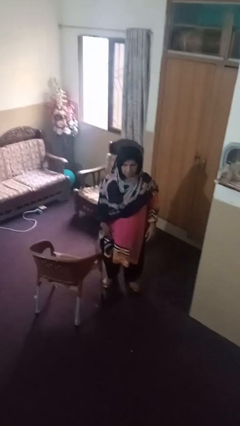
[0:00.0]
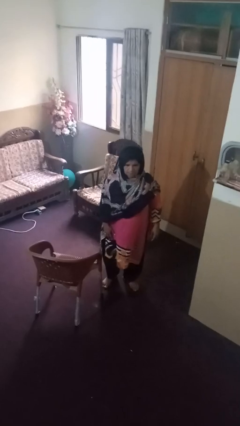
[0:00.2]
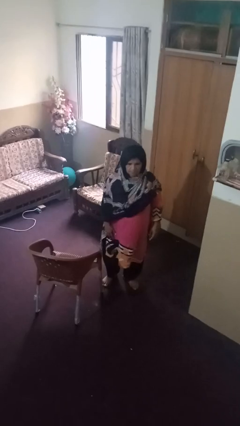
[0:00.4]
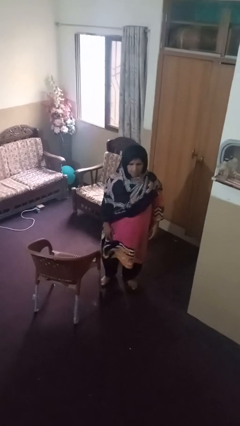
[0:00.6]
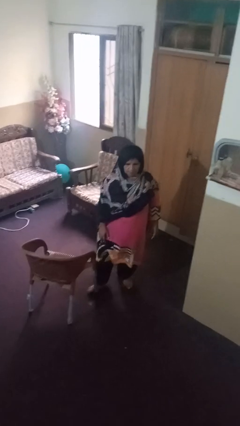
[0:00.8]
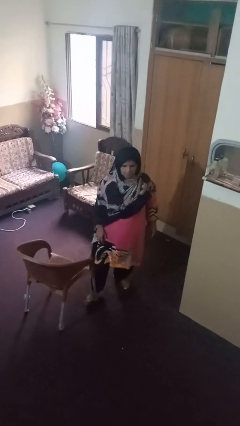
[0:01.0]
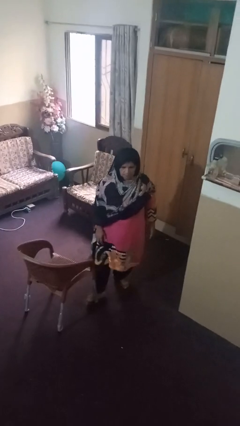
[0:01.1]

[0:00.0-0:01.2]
person trips on object on floor

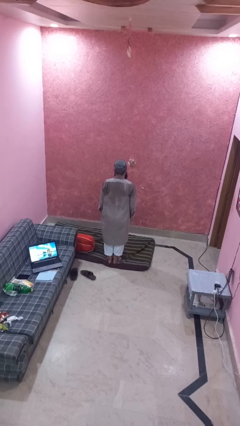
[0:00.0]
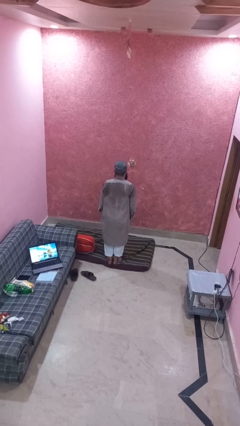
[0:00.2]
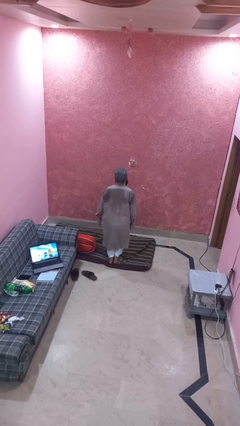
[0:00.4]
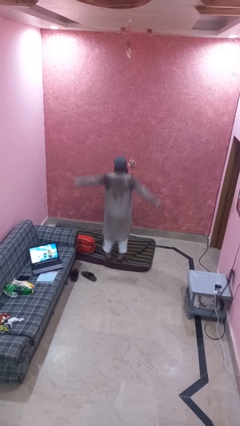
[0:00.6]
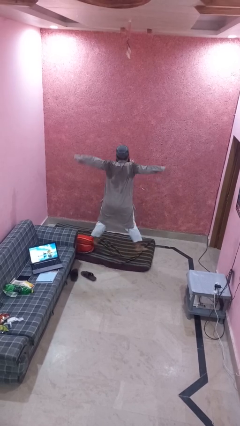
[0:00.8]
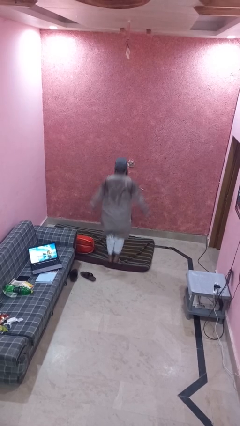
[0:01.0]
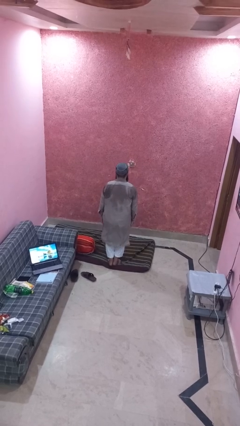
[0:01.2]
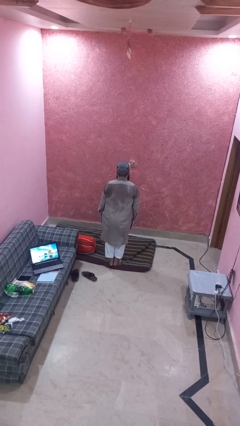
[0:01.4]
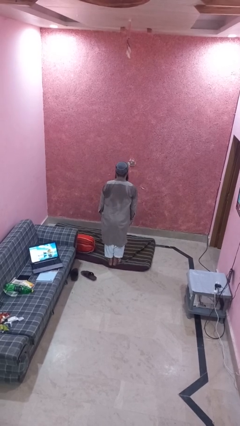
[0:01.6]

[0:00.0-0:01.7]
person exercises with jumping jacks

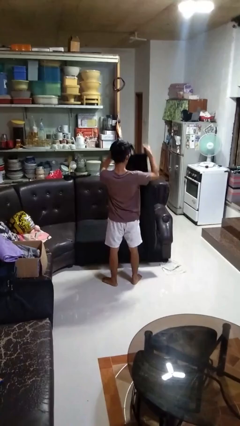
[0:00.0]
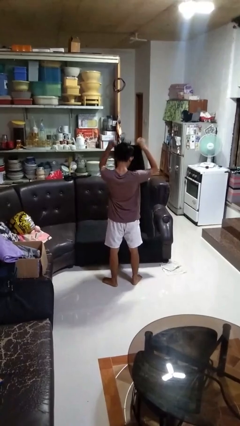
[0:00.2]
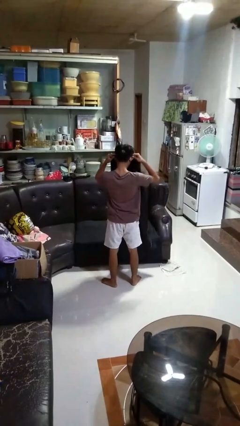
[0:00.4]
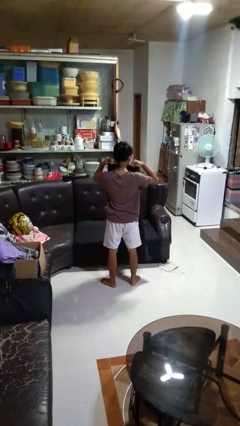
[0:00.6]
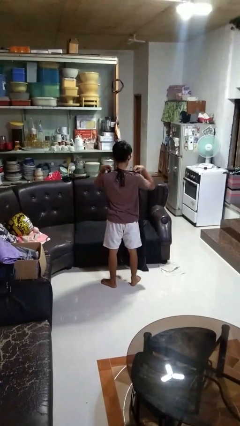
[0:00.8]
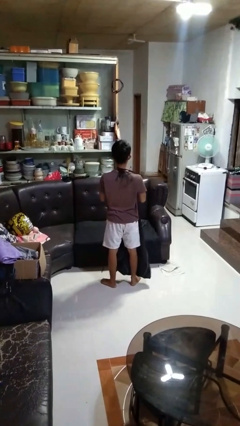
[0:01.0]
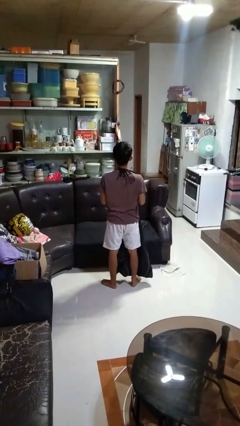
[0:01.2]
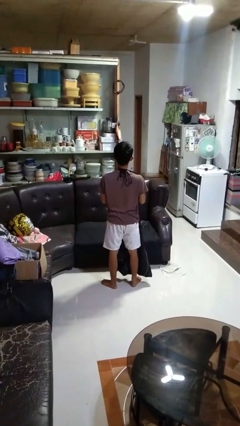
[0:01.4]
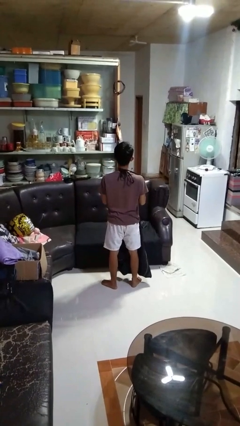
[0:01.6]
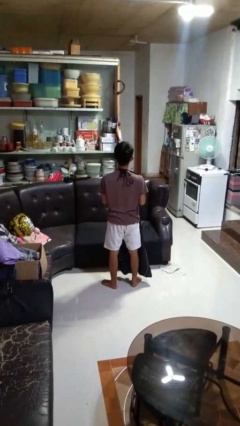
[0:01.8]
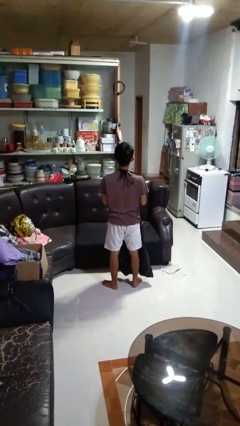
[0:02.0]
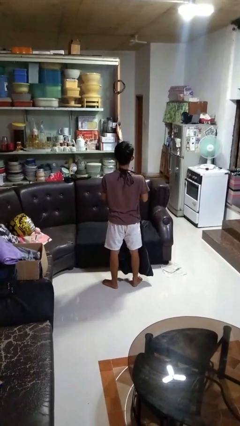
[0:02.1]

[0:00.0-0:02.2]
person puts on apron

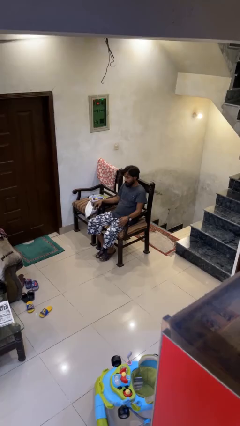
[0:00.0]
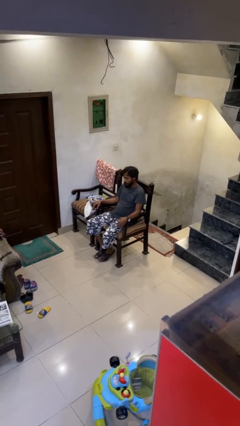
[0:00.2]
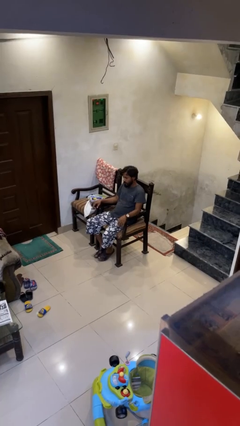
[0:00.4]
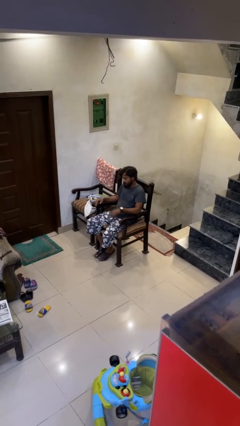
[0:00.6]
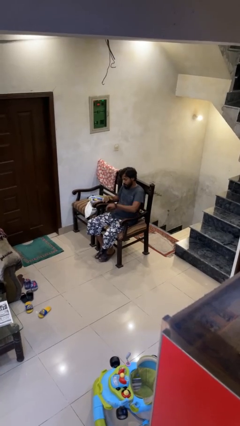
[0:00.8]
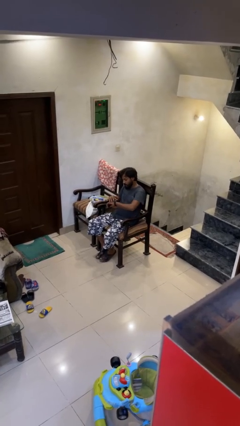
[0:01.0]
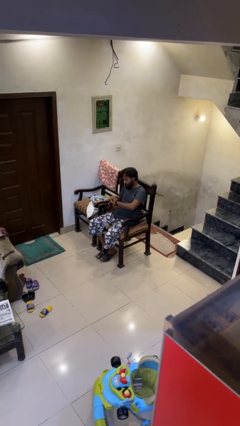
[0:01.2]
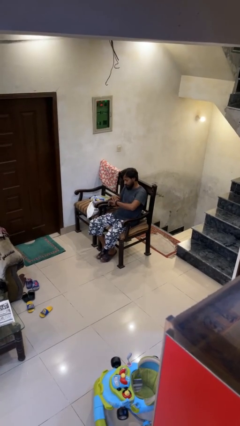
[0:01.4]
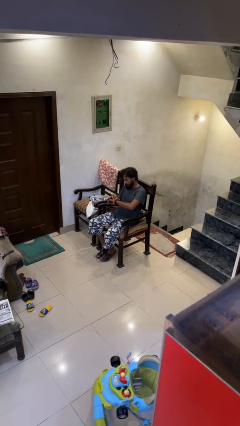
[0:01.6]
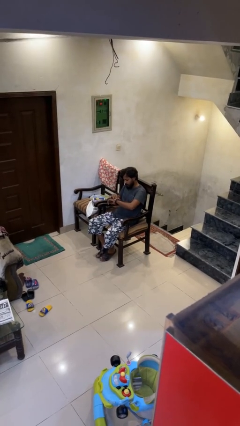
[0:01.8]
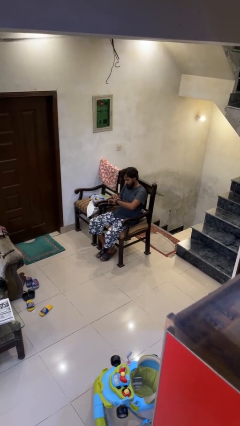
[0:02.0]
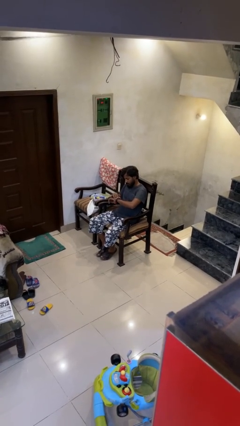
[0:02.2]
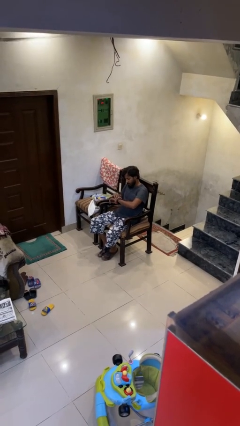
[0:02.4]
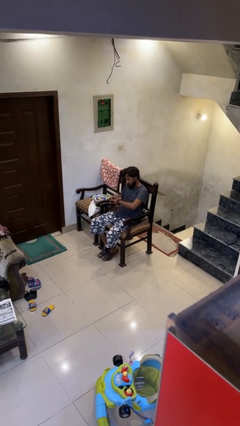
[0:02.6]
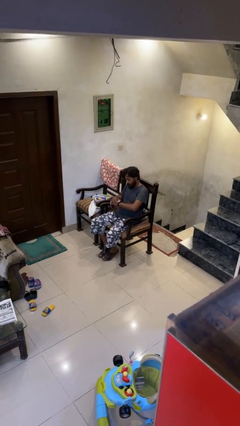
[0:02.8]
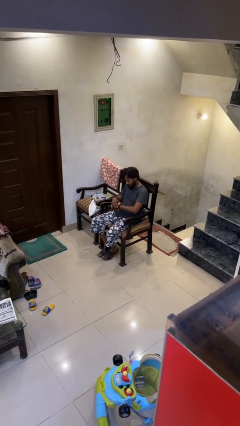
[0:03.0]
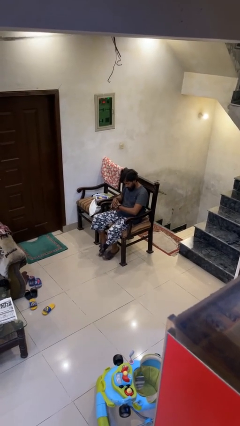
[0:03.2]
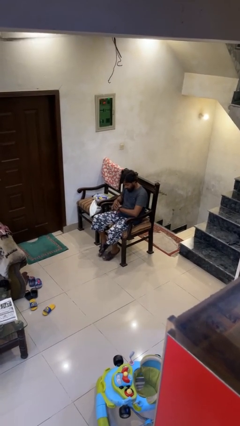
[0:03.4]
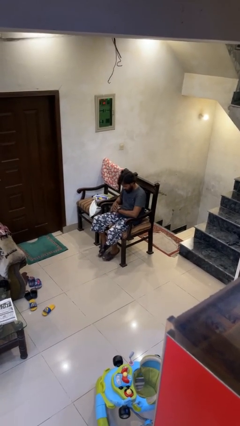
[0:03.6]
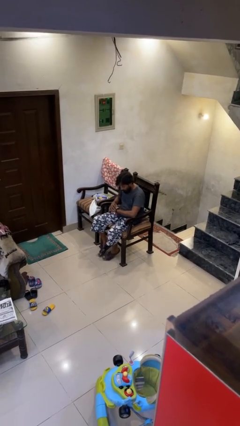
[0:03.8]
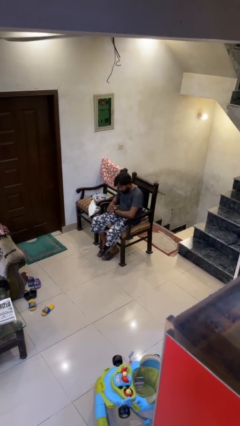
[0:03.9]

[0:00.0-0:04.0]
person looks at wristwatch

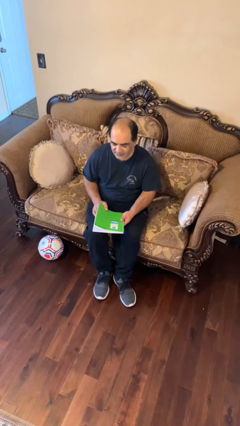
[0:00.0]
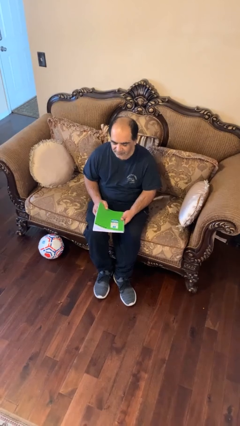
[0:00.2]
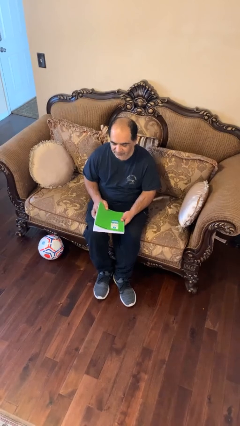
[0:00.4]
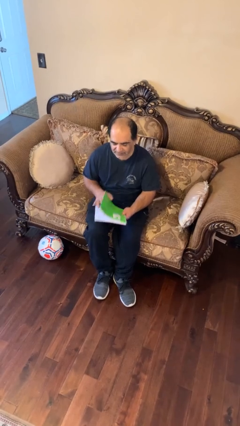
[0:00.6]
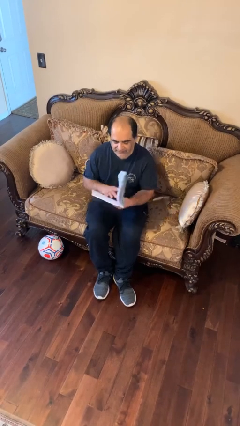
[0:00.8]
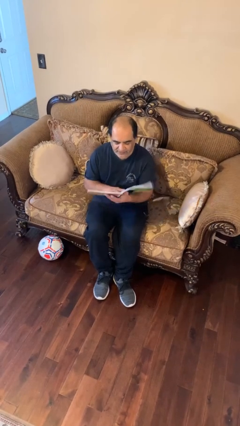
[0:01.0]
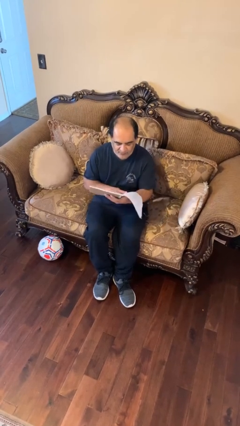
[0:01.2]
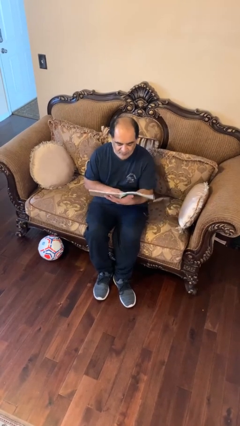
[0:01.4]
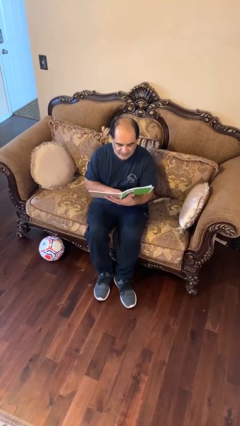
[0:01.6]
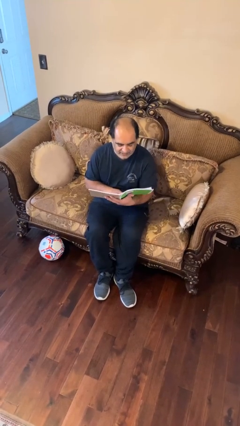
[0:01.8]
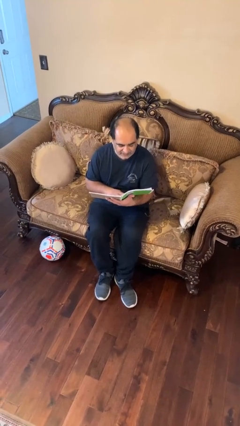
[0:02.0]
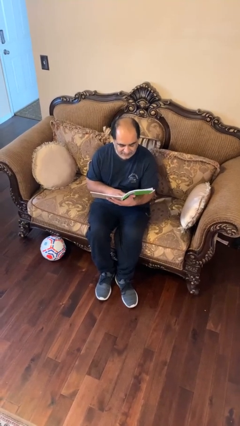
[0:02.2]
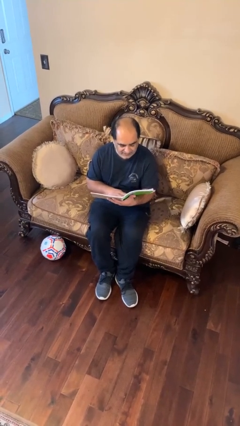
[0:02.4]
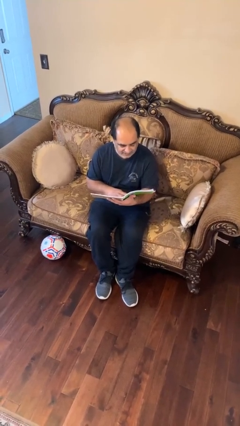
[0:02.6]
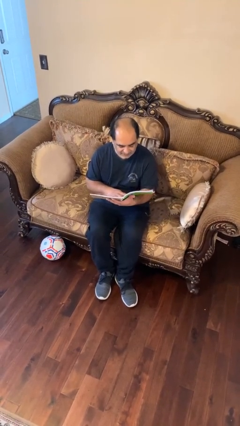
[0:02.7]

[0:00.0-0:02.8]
person reads document

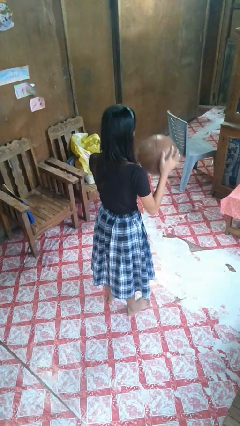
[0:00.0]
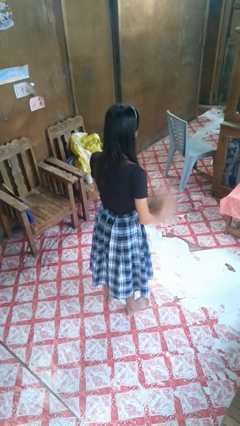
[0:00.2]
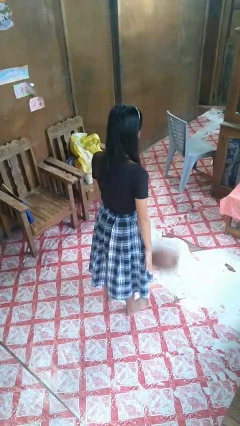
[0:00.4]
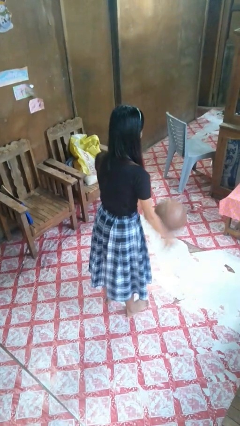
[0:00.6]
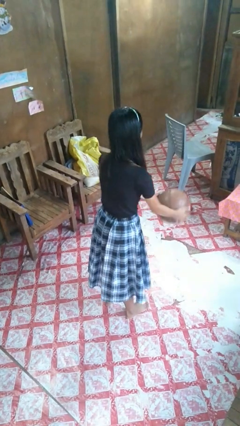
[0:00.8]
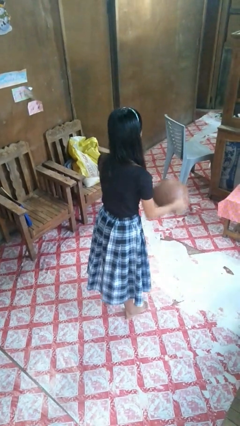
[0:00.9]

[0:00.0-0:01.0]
person bounces ball on floor

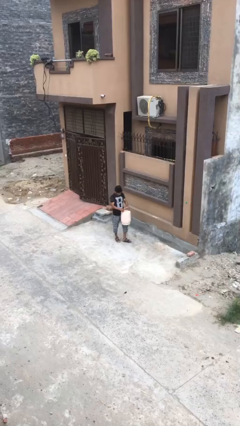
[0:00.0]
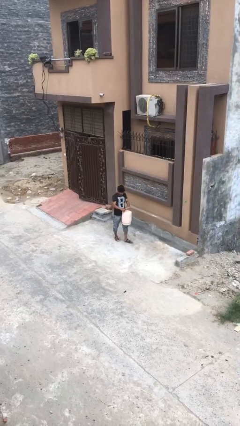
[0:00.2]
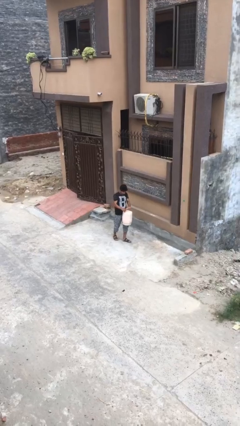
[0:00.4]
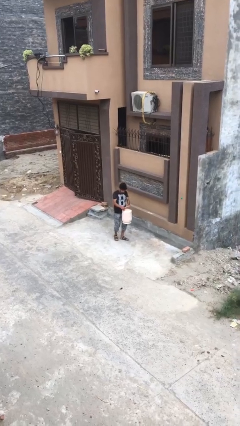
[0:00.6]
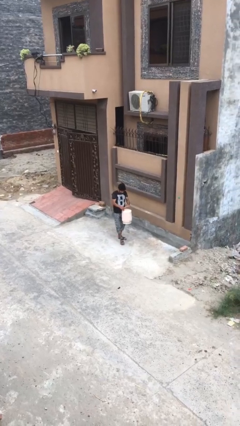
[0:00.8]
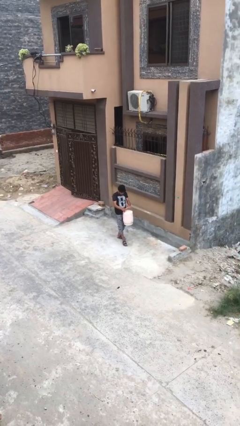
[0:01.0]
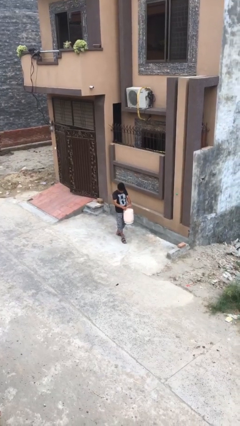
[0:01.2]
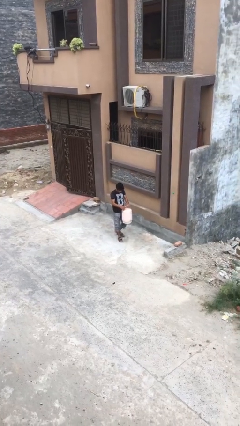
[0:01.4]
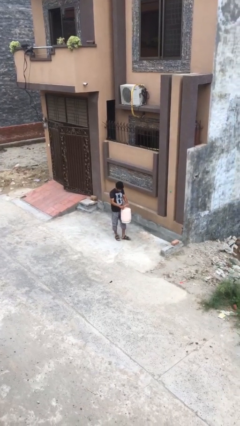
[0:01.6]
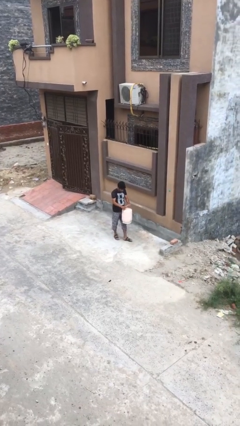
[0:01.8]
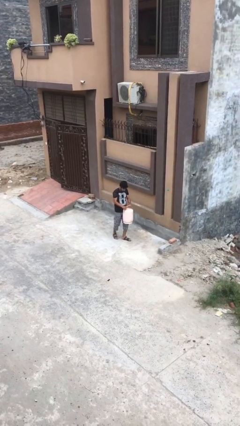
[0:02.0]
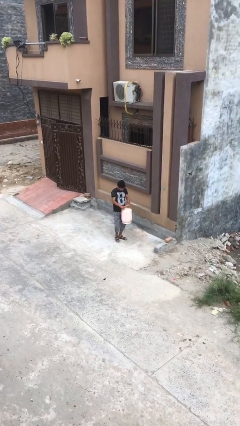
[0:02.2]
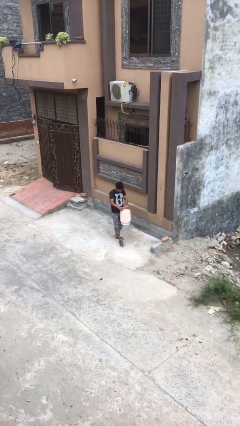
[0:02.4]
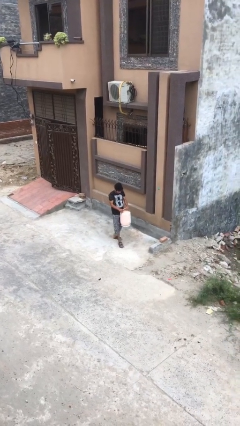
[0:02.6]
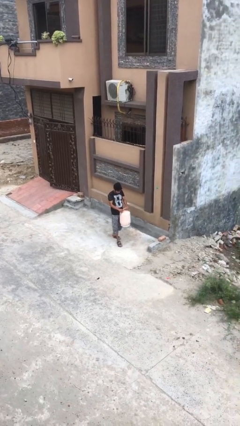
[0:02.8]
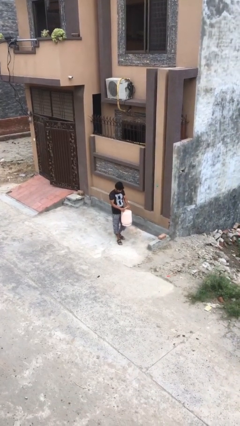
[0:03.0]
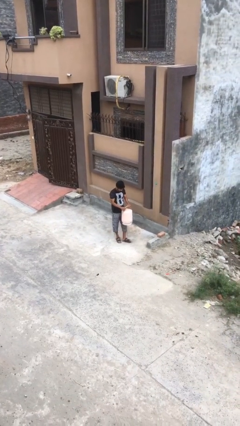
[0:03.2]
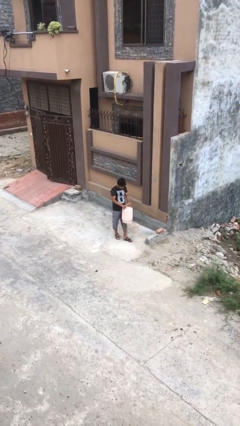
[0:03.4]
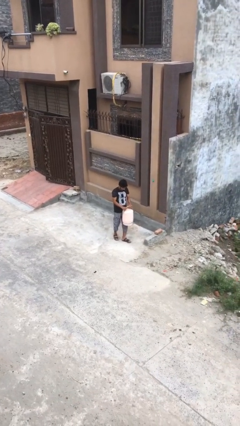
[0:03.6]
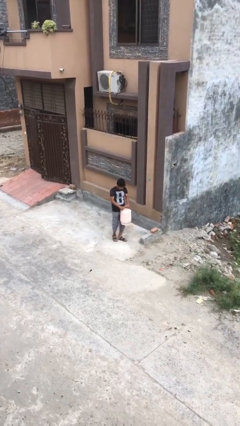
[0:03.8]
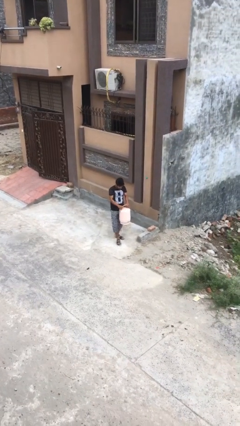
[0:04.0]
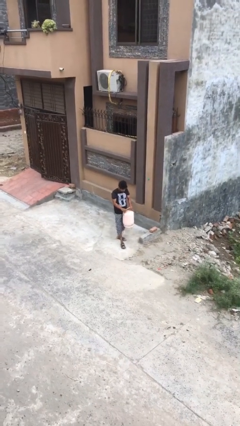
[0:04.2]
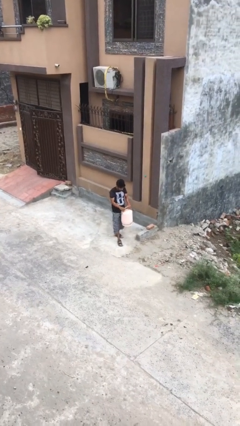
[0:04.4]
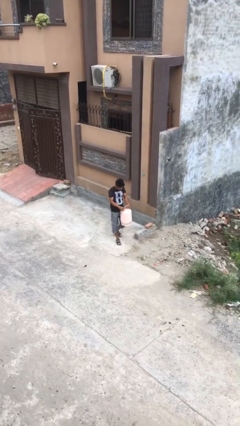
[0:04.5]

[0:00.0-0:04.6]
person carries heavy object
